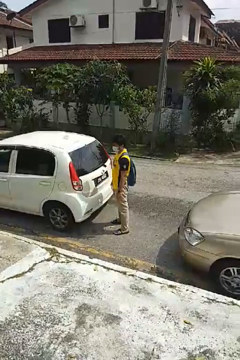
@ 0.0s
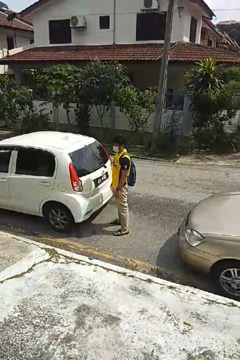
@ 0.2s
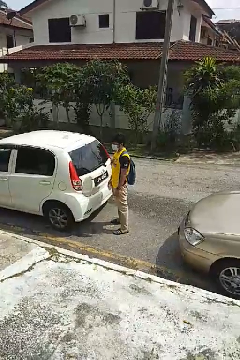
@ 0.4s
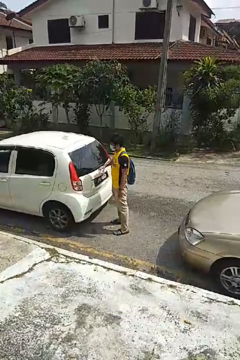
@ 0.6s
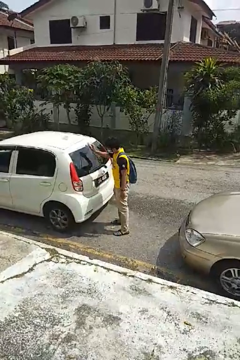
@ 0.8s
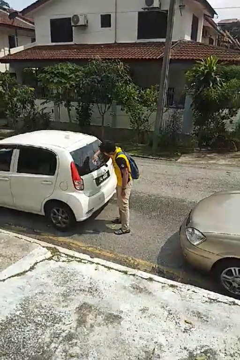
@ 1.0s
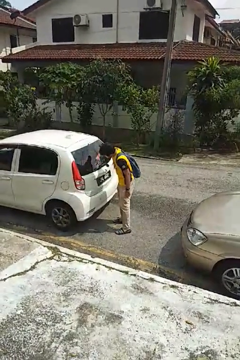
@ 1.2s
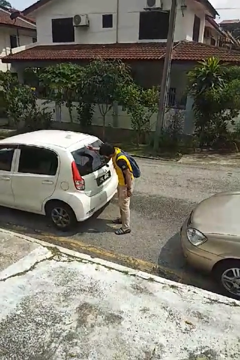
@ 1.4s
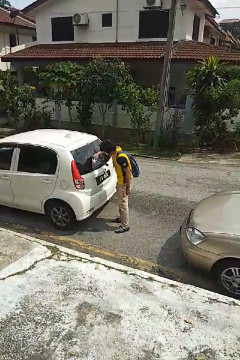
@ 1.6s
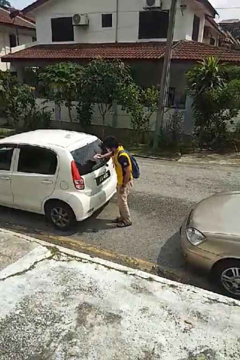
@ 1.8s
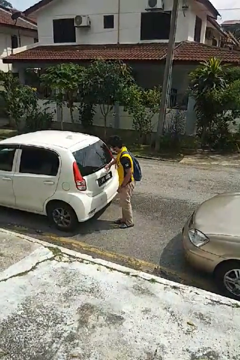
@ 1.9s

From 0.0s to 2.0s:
person polishes car with rag

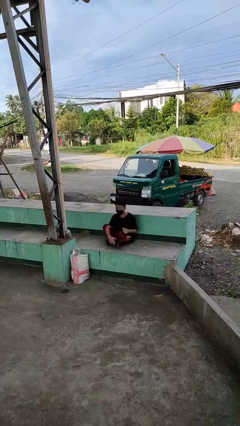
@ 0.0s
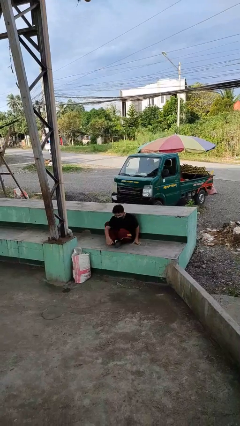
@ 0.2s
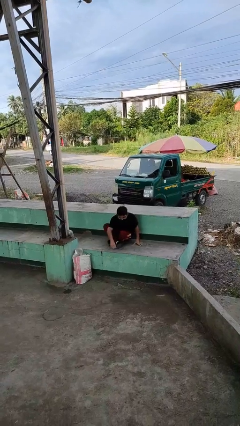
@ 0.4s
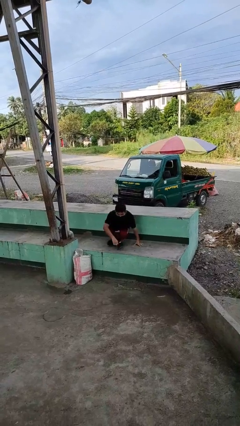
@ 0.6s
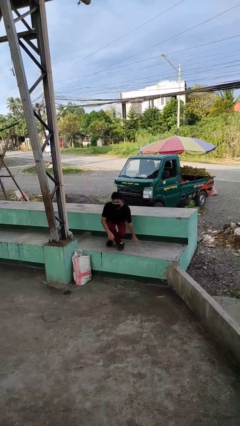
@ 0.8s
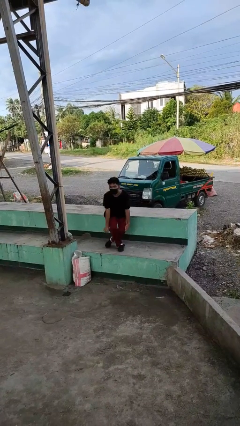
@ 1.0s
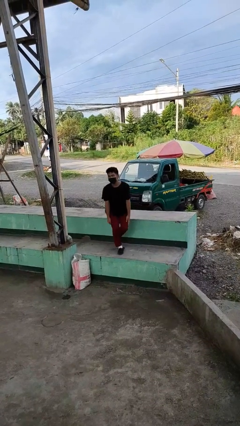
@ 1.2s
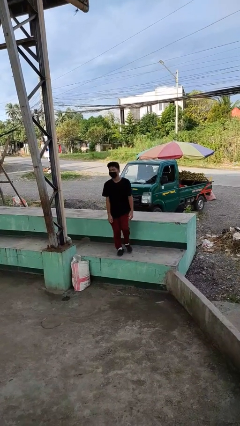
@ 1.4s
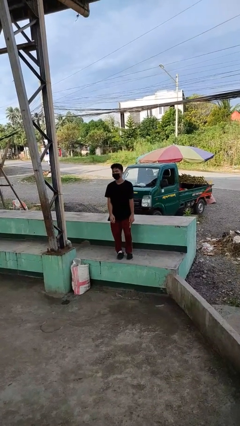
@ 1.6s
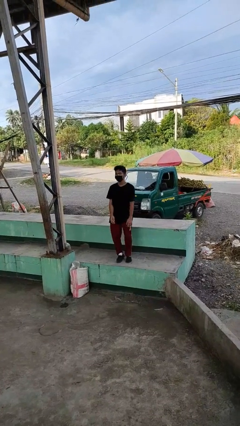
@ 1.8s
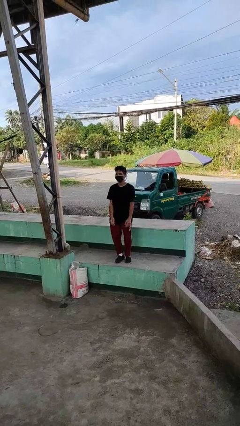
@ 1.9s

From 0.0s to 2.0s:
person stands up from floor

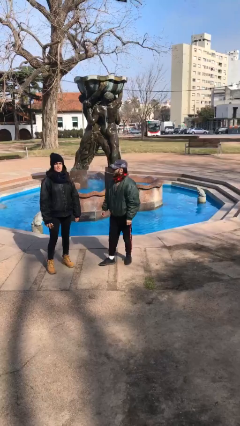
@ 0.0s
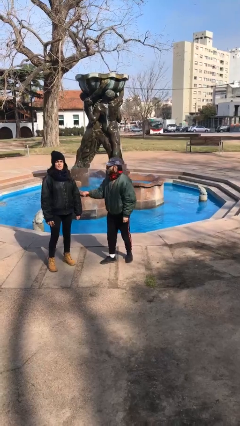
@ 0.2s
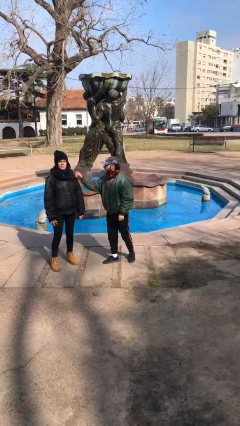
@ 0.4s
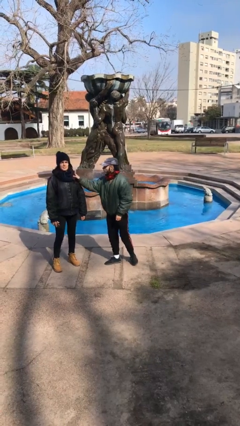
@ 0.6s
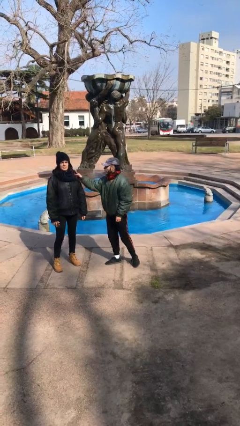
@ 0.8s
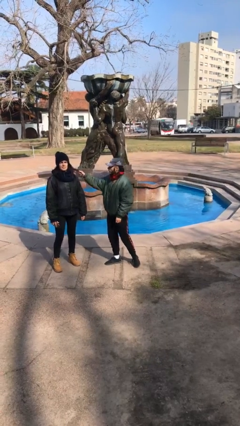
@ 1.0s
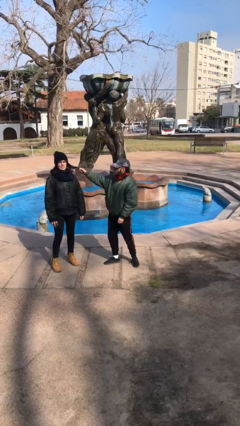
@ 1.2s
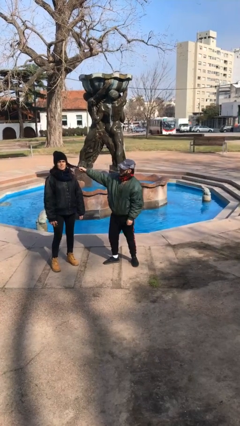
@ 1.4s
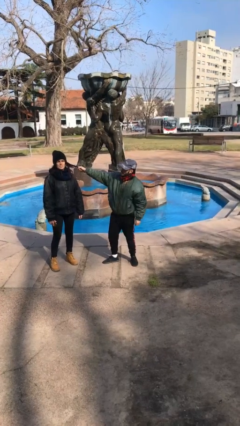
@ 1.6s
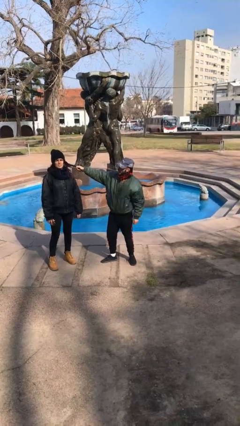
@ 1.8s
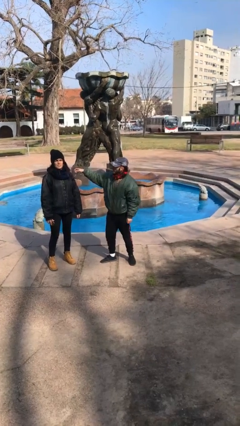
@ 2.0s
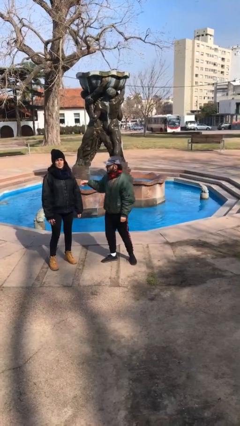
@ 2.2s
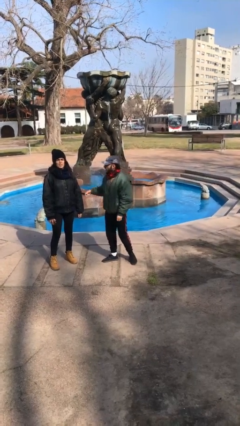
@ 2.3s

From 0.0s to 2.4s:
person grabs person by hair

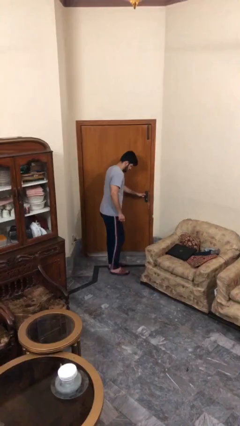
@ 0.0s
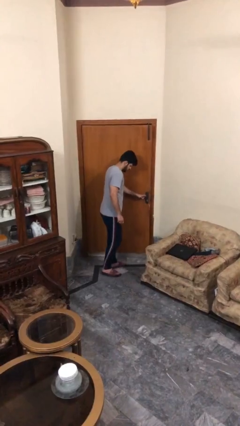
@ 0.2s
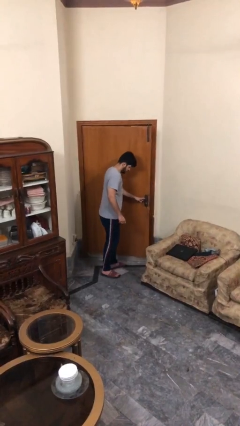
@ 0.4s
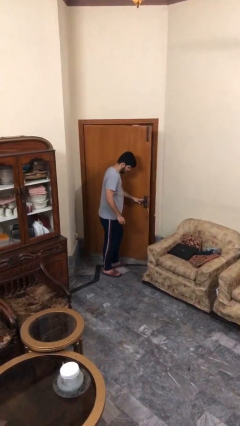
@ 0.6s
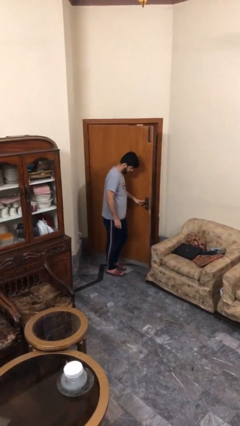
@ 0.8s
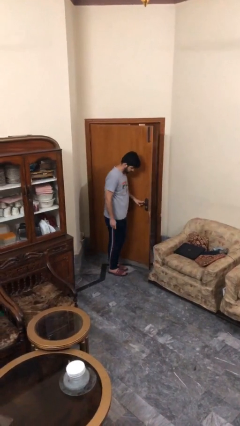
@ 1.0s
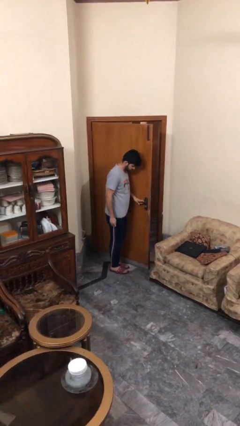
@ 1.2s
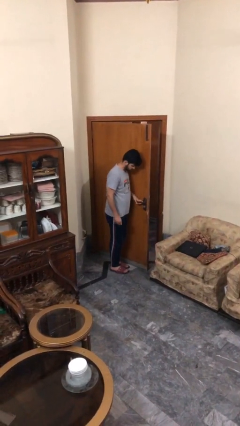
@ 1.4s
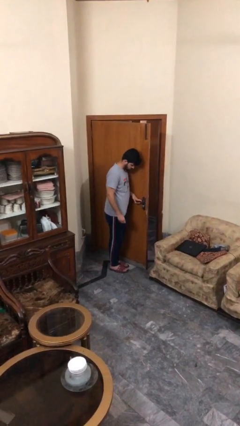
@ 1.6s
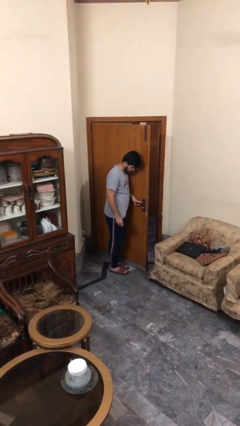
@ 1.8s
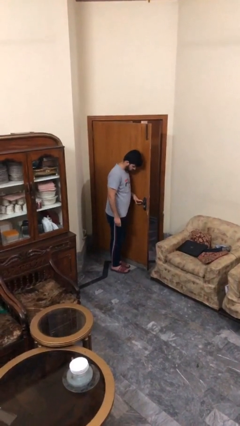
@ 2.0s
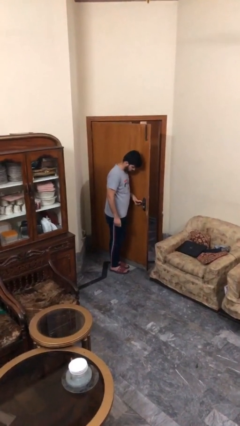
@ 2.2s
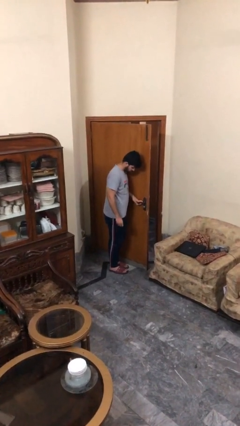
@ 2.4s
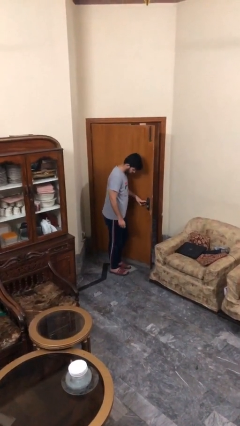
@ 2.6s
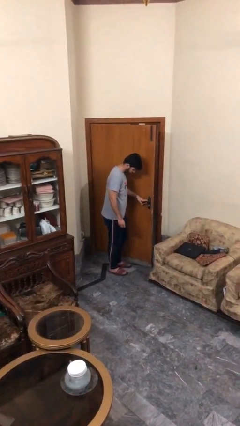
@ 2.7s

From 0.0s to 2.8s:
person opens facility door

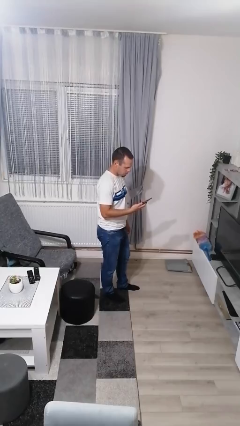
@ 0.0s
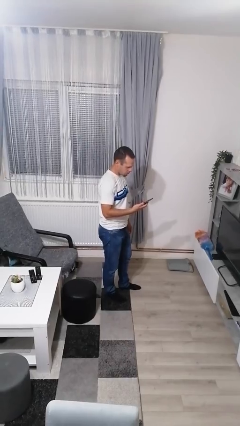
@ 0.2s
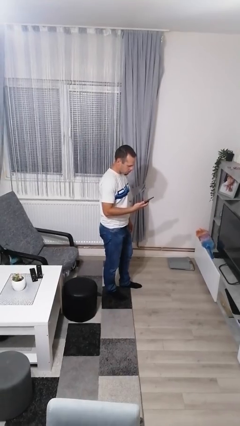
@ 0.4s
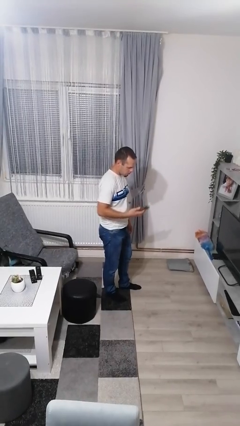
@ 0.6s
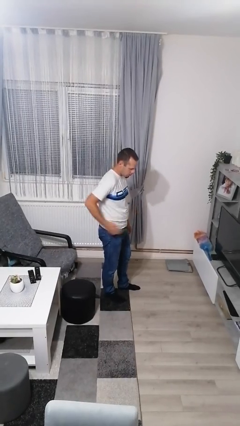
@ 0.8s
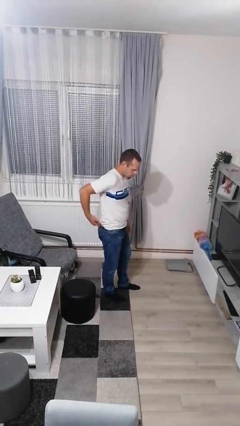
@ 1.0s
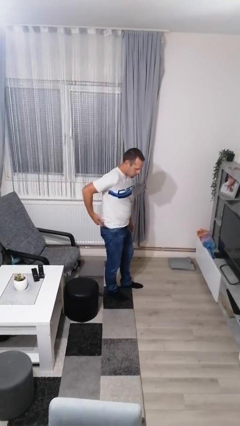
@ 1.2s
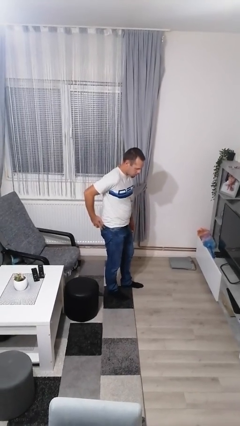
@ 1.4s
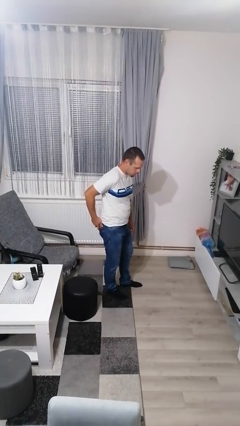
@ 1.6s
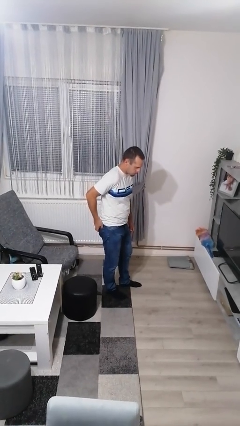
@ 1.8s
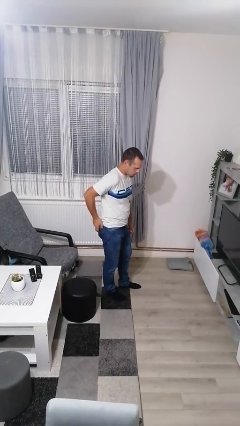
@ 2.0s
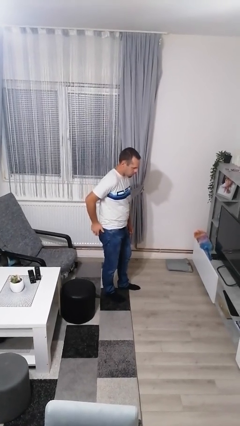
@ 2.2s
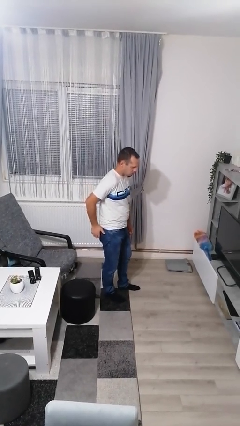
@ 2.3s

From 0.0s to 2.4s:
person puts phone into pocket

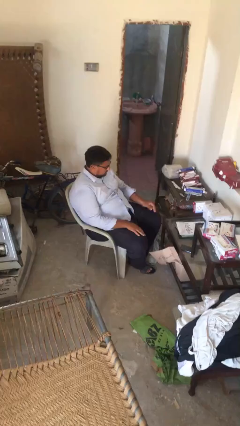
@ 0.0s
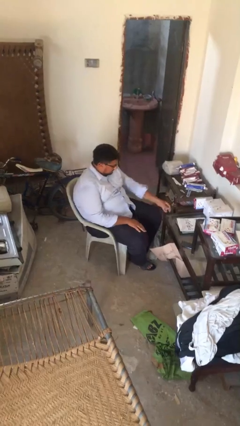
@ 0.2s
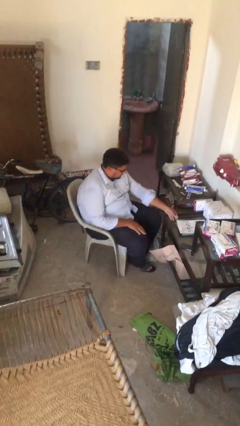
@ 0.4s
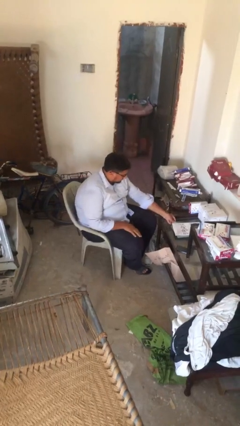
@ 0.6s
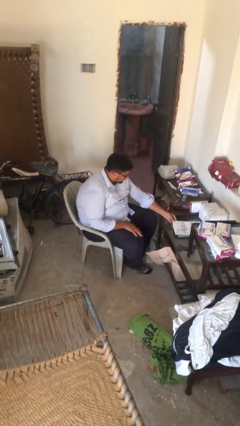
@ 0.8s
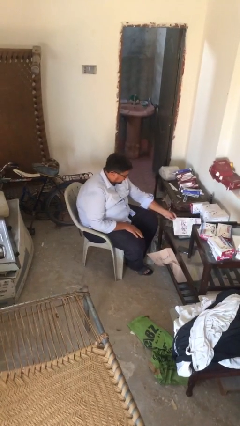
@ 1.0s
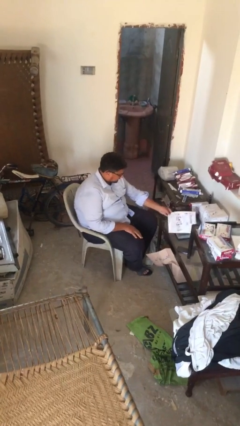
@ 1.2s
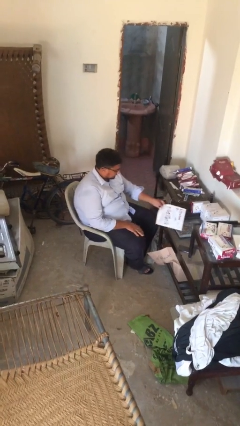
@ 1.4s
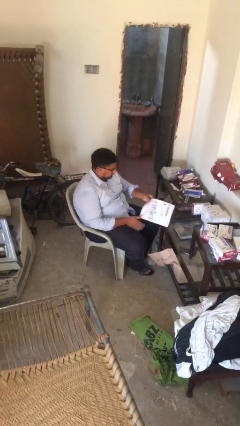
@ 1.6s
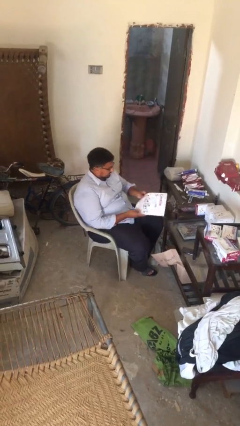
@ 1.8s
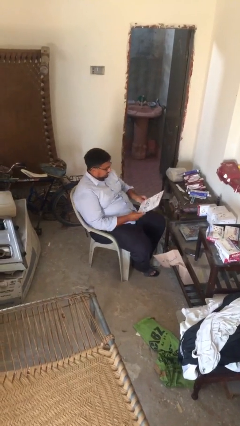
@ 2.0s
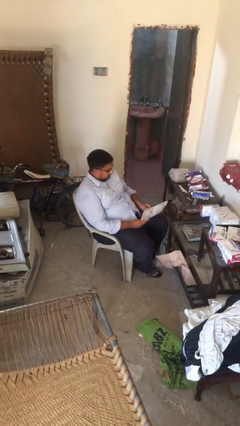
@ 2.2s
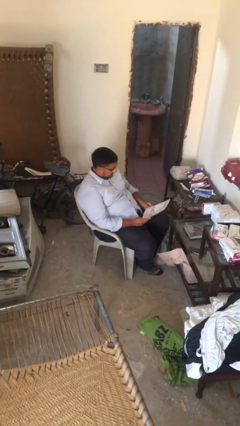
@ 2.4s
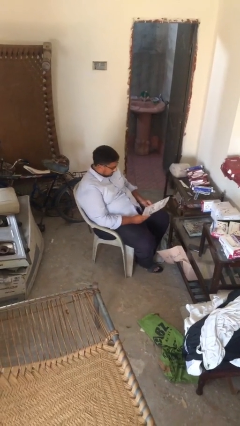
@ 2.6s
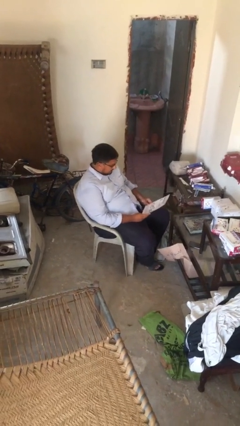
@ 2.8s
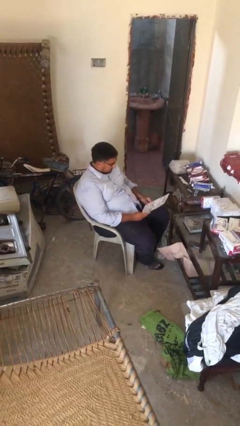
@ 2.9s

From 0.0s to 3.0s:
person picks up object from table

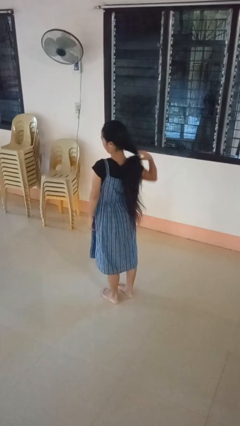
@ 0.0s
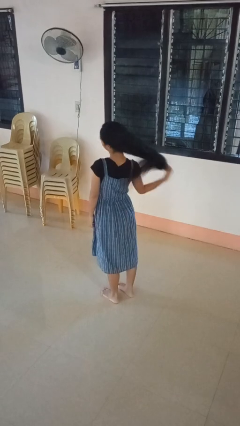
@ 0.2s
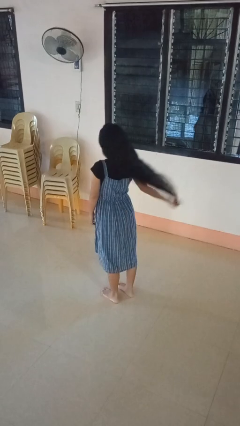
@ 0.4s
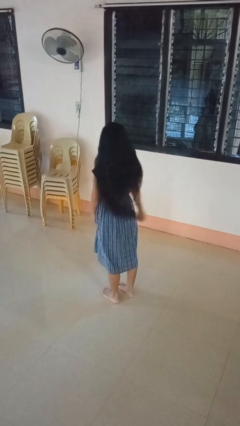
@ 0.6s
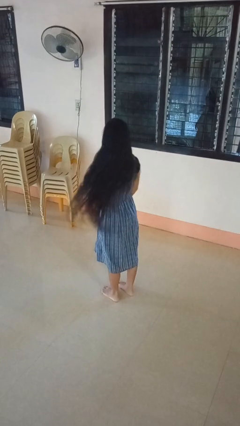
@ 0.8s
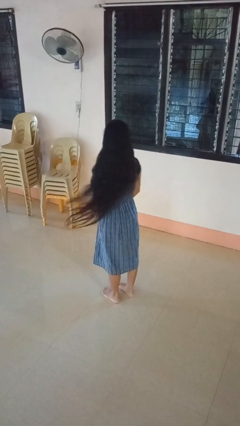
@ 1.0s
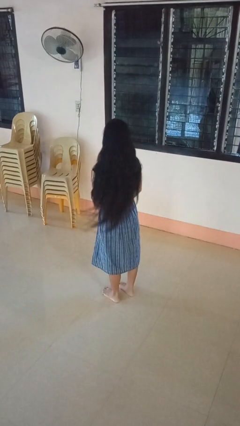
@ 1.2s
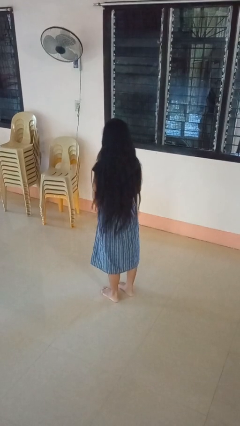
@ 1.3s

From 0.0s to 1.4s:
person takes off hairtie

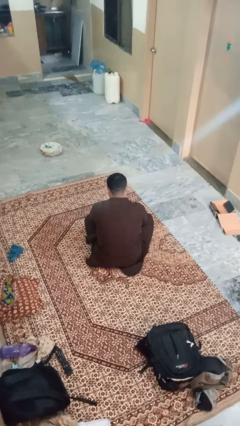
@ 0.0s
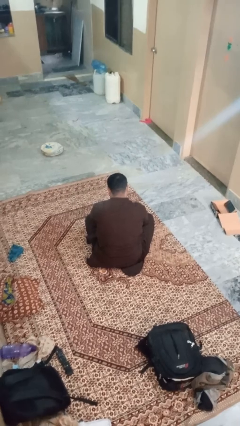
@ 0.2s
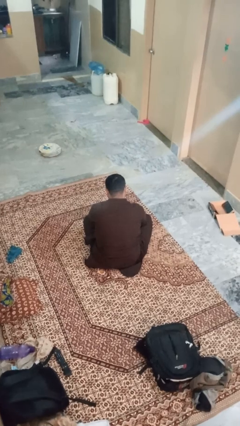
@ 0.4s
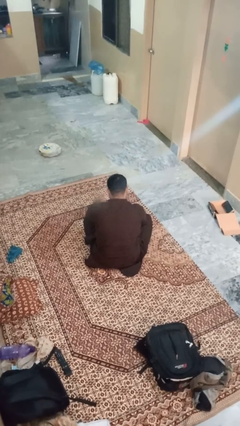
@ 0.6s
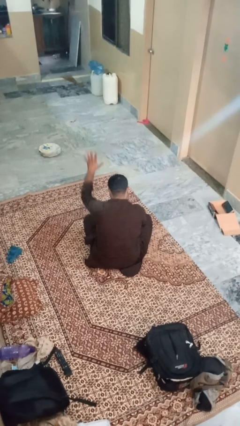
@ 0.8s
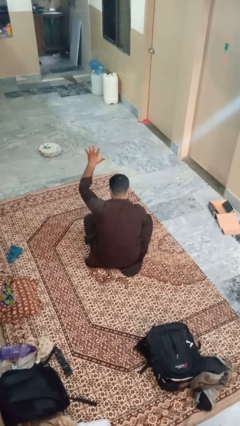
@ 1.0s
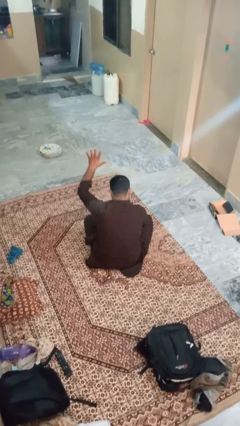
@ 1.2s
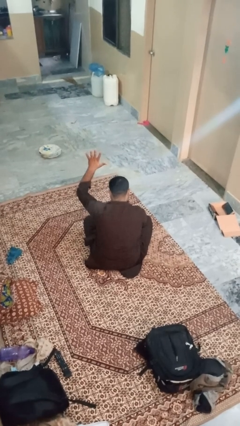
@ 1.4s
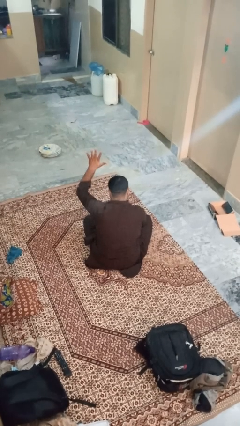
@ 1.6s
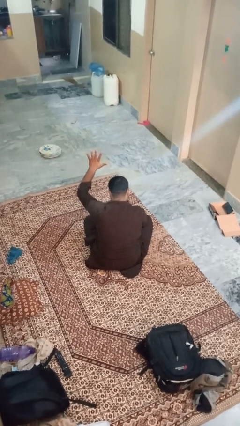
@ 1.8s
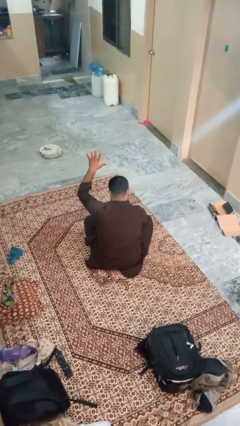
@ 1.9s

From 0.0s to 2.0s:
person gestures number five
